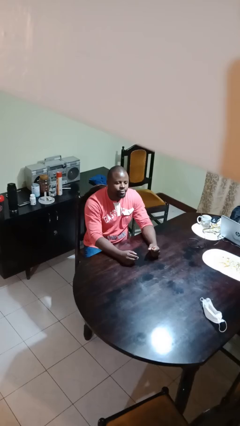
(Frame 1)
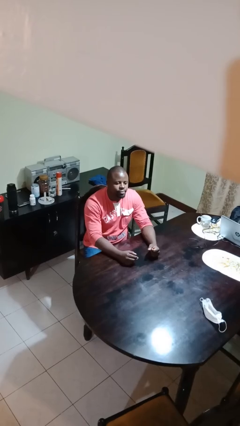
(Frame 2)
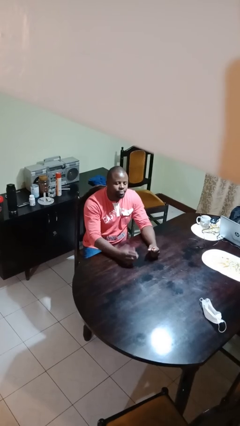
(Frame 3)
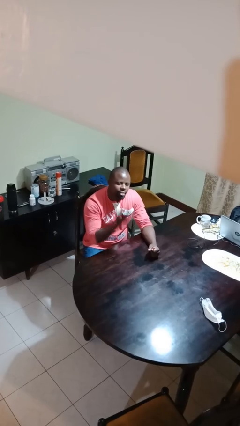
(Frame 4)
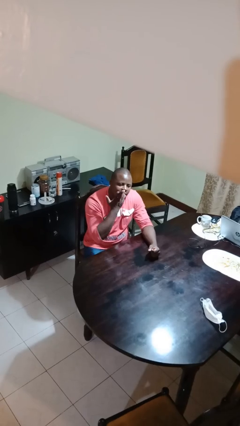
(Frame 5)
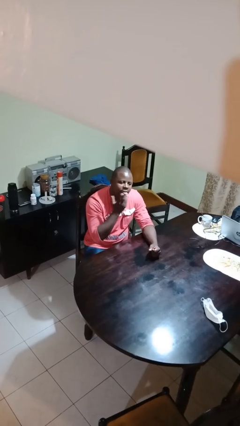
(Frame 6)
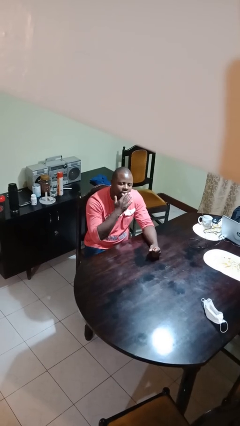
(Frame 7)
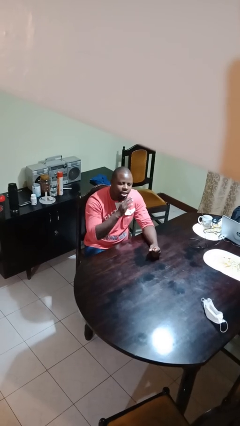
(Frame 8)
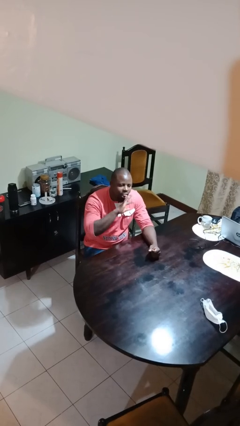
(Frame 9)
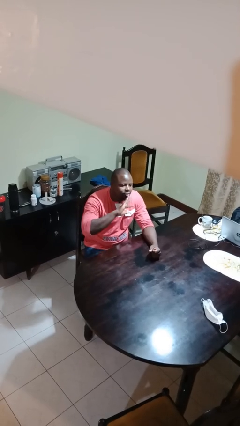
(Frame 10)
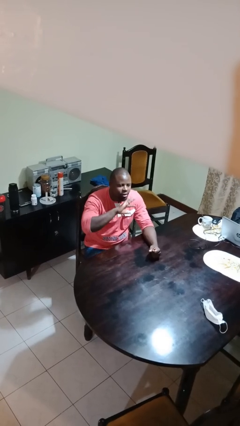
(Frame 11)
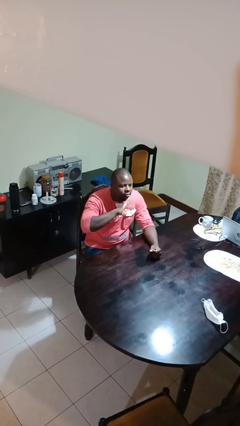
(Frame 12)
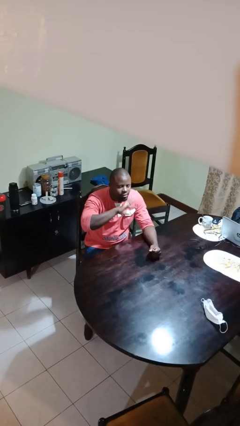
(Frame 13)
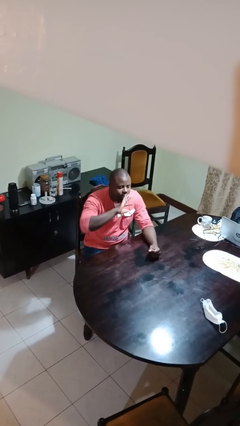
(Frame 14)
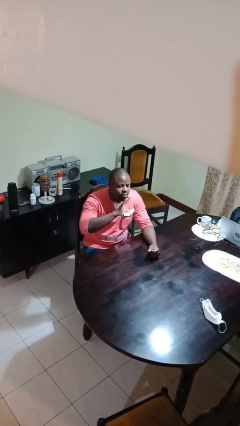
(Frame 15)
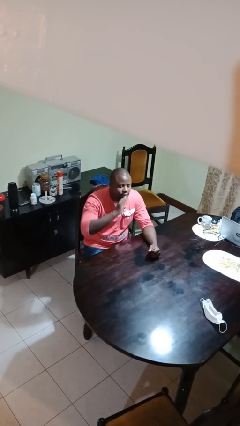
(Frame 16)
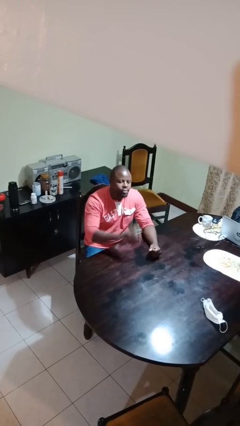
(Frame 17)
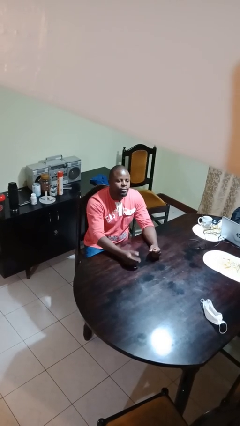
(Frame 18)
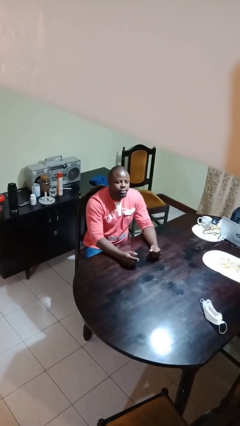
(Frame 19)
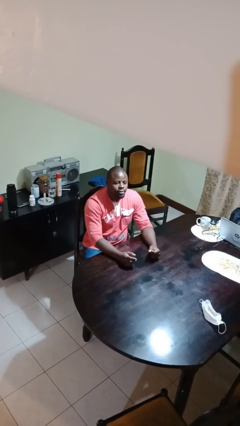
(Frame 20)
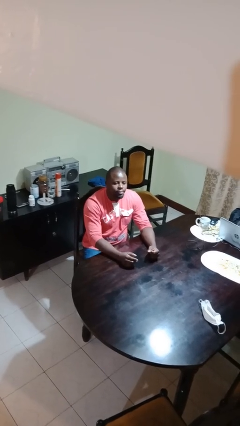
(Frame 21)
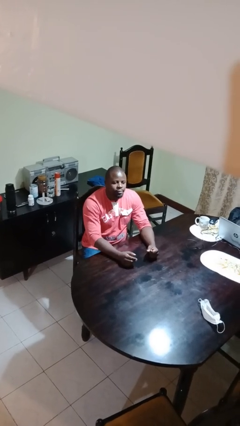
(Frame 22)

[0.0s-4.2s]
person licks fingers

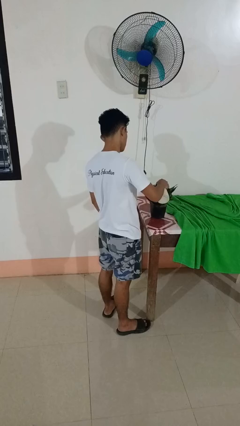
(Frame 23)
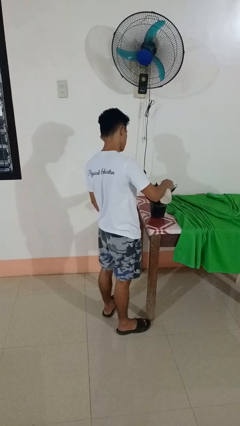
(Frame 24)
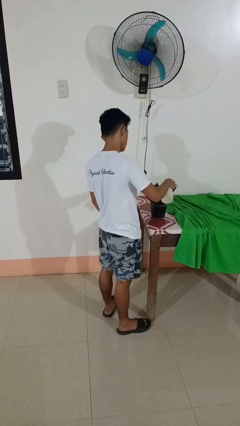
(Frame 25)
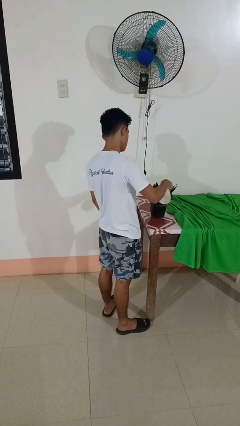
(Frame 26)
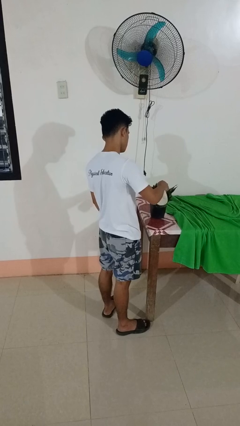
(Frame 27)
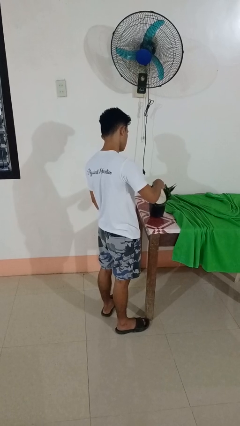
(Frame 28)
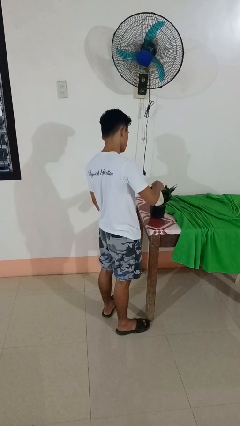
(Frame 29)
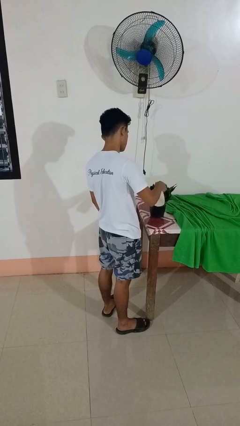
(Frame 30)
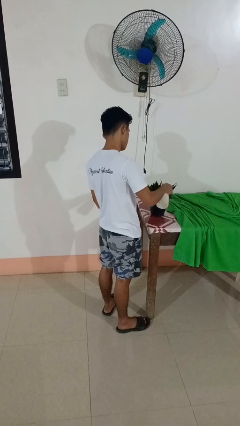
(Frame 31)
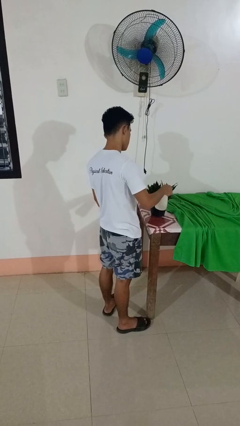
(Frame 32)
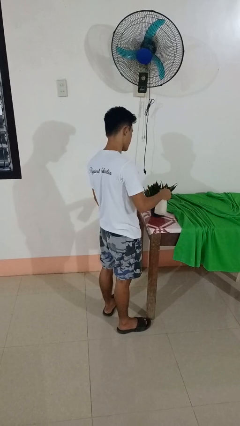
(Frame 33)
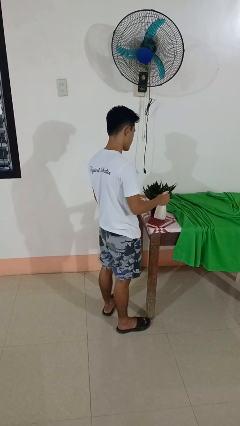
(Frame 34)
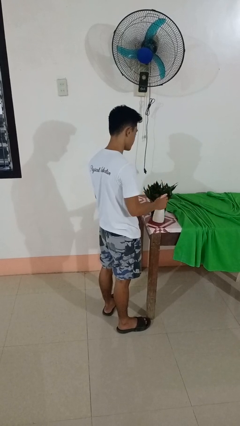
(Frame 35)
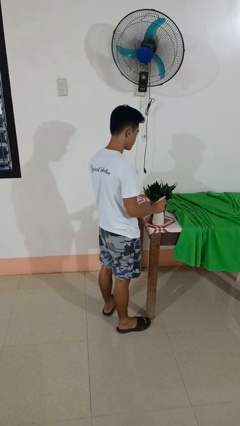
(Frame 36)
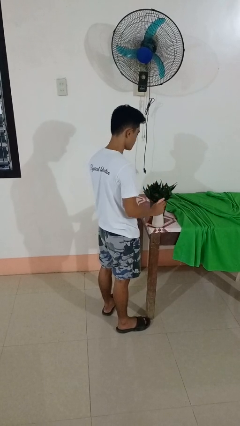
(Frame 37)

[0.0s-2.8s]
person waters houseplant

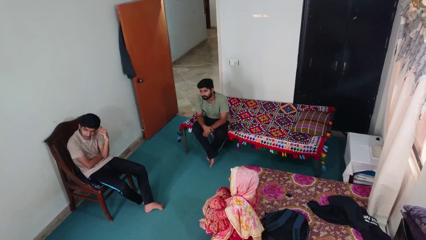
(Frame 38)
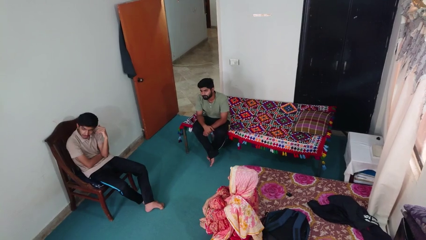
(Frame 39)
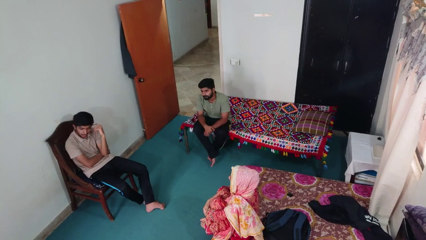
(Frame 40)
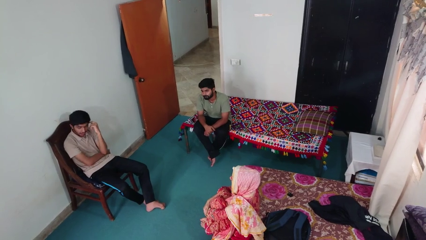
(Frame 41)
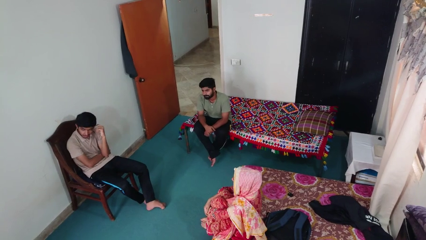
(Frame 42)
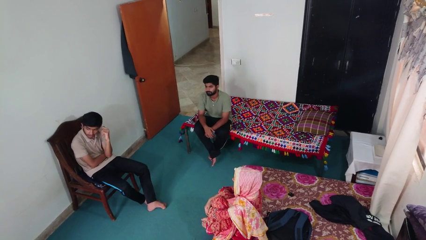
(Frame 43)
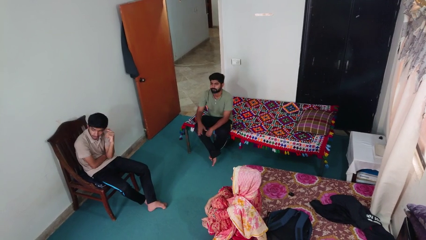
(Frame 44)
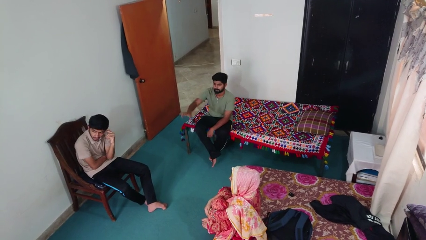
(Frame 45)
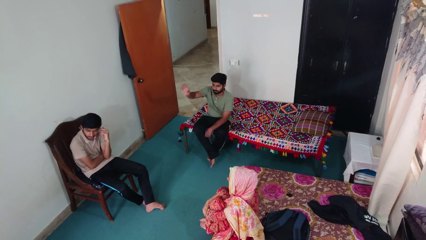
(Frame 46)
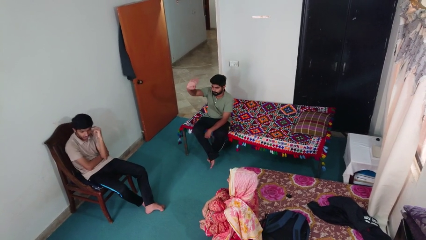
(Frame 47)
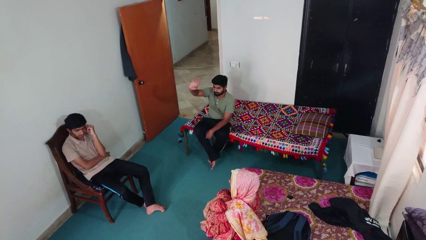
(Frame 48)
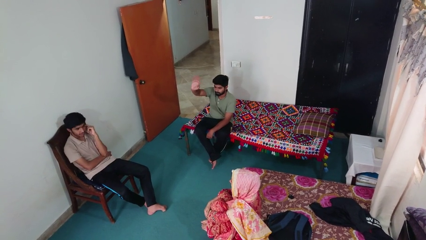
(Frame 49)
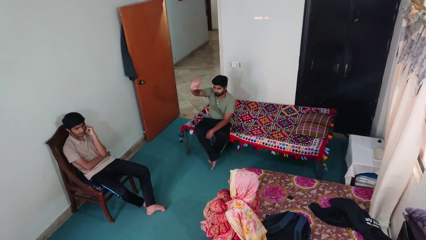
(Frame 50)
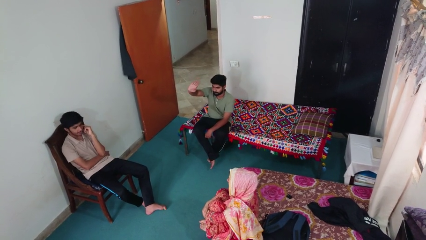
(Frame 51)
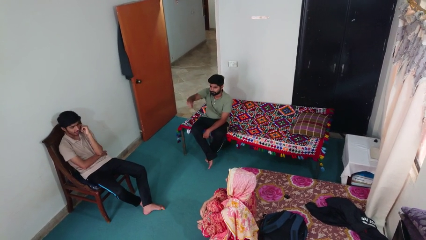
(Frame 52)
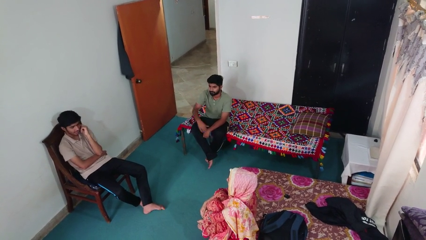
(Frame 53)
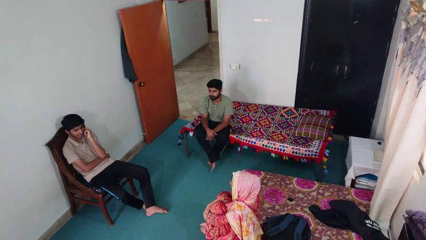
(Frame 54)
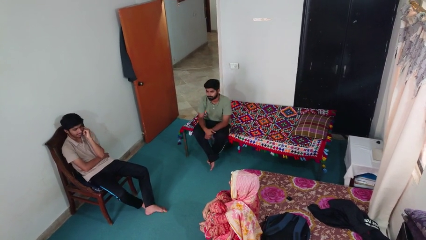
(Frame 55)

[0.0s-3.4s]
person waves at person

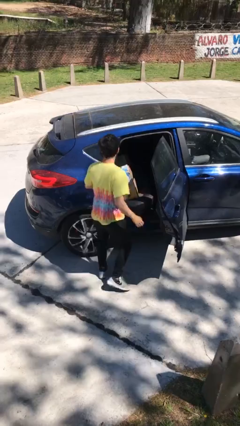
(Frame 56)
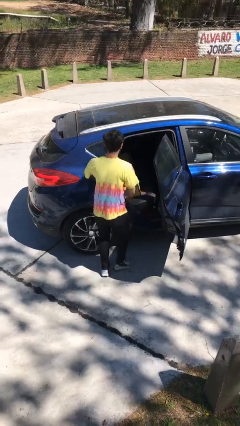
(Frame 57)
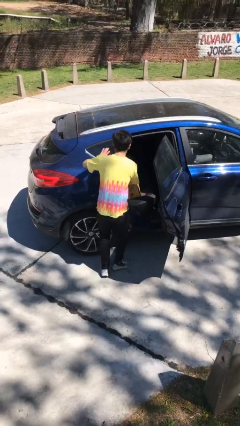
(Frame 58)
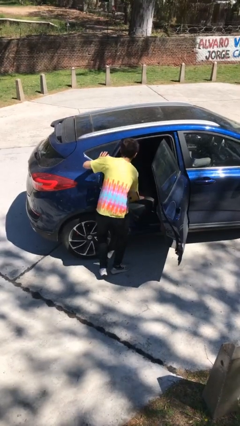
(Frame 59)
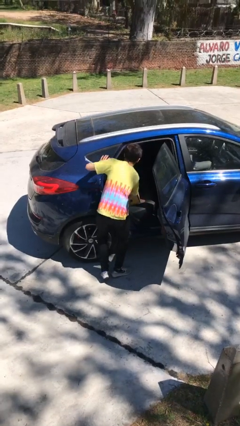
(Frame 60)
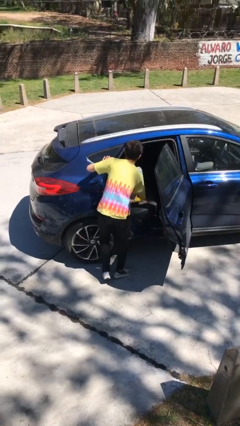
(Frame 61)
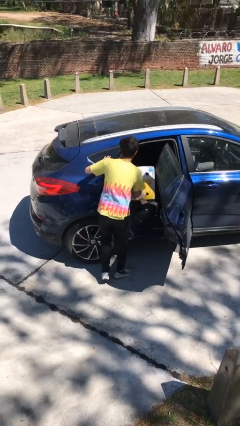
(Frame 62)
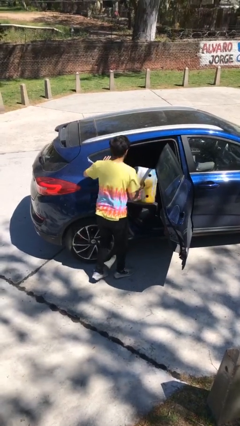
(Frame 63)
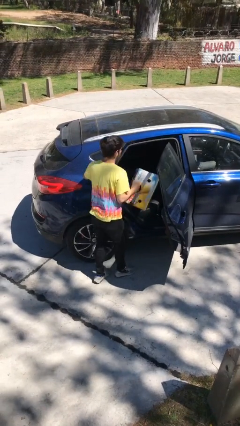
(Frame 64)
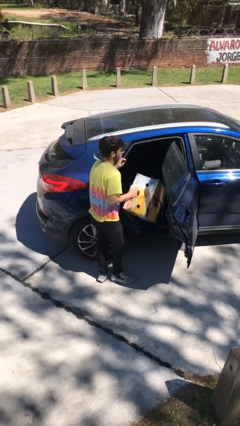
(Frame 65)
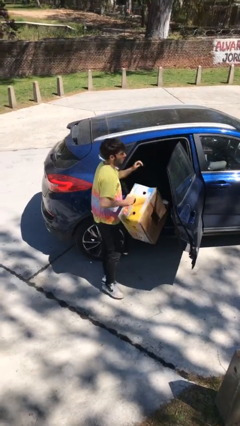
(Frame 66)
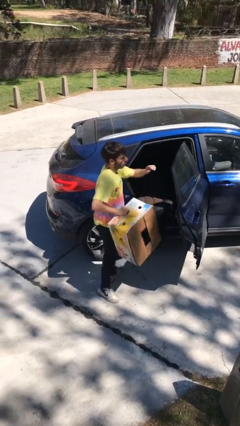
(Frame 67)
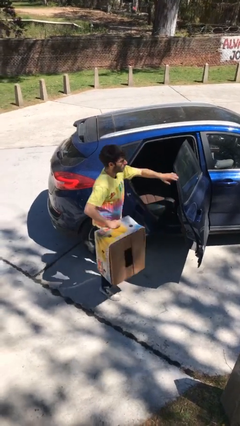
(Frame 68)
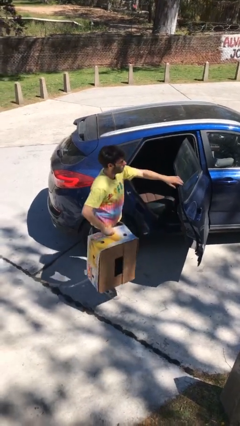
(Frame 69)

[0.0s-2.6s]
person unloads car

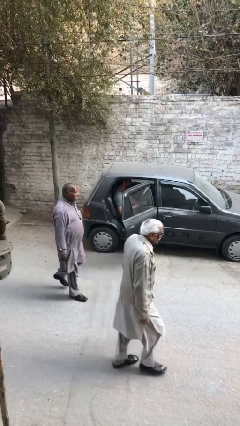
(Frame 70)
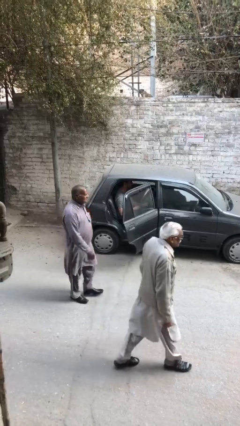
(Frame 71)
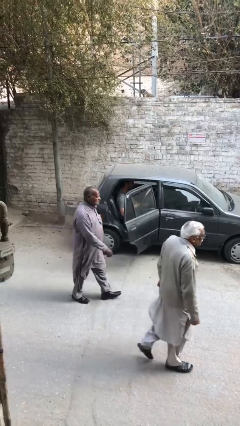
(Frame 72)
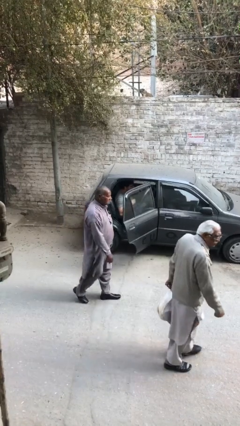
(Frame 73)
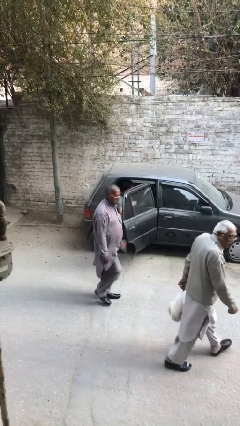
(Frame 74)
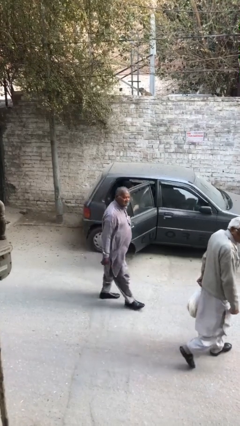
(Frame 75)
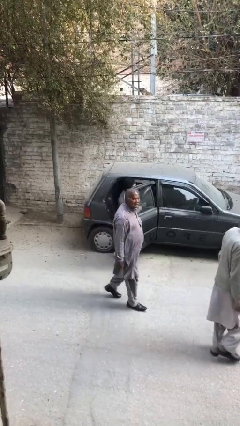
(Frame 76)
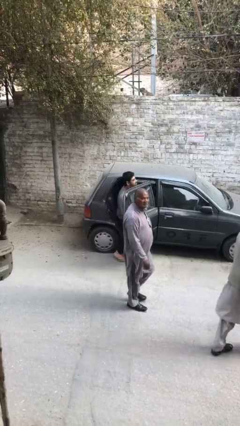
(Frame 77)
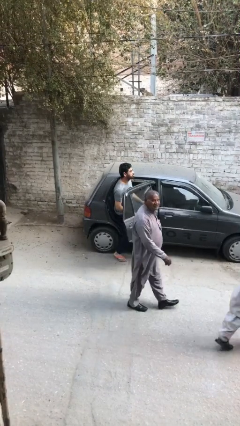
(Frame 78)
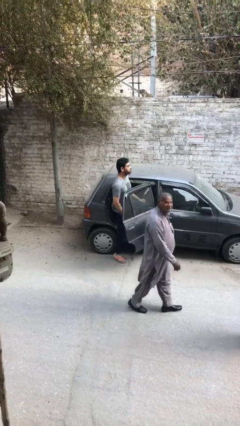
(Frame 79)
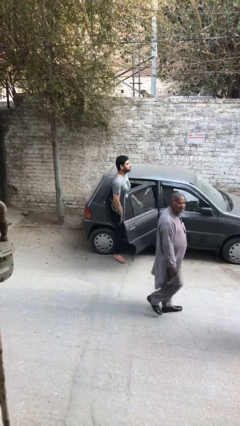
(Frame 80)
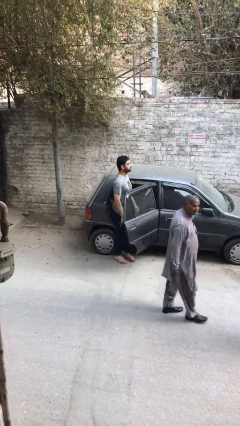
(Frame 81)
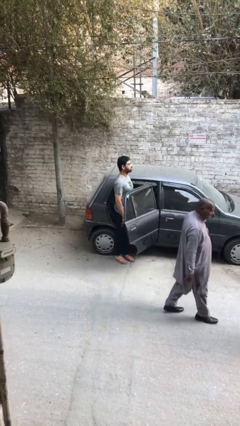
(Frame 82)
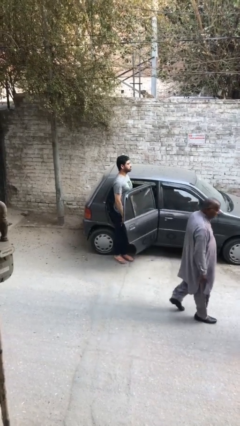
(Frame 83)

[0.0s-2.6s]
person exits car

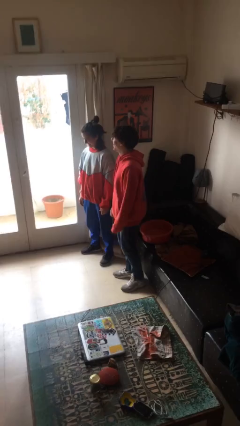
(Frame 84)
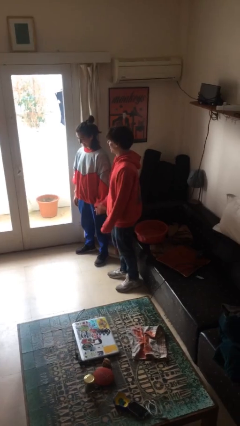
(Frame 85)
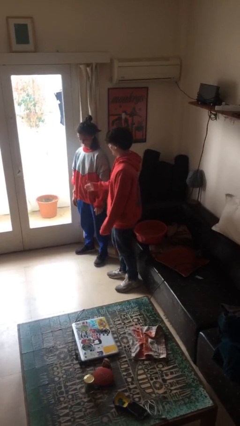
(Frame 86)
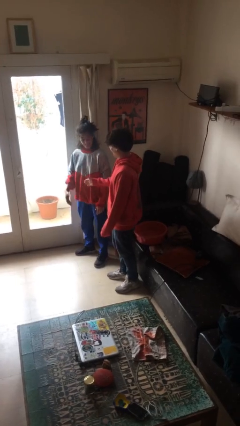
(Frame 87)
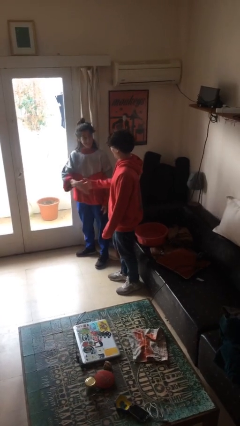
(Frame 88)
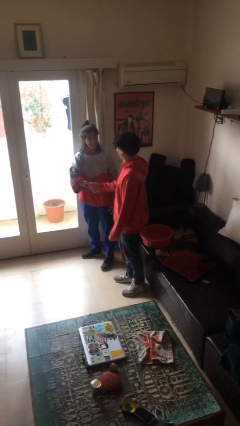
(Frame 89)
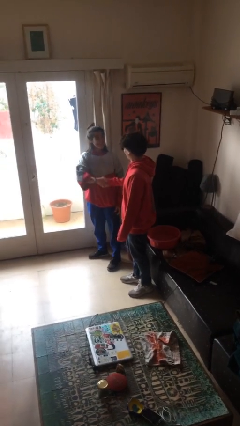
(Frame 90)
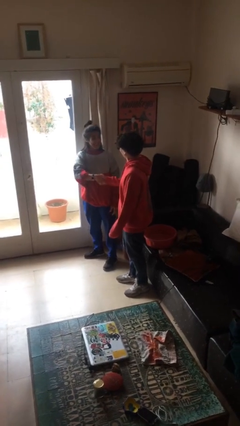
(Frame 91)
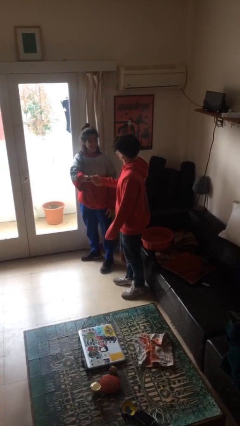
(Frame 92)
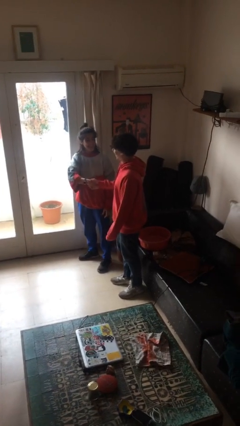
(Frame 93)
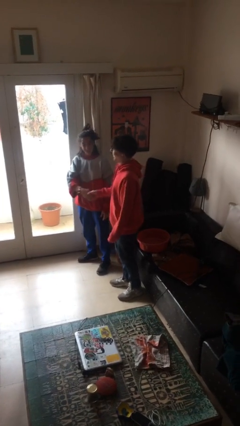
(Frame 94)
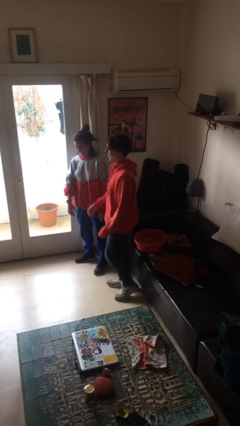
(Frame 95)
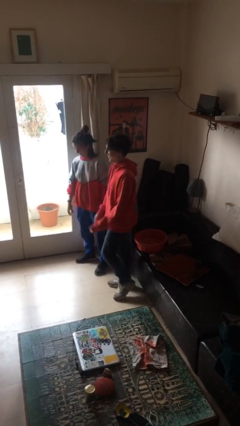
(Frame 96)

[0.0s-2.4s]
person shakes hand
